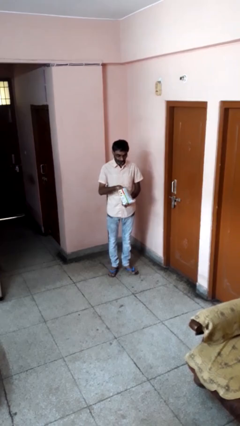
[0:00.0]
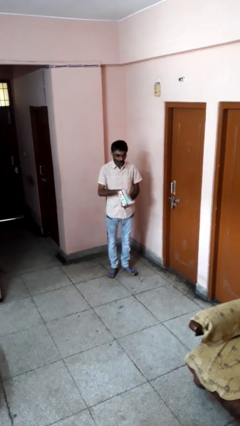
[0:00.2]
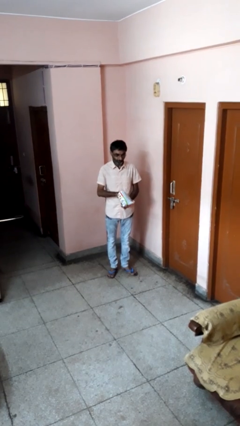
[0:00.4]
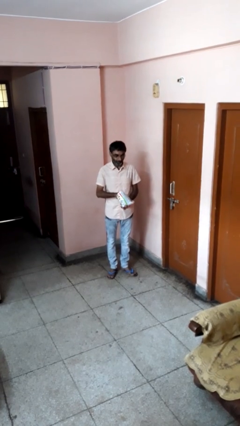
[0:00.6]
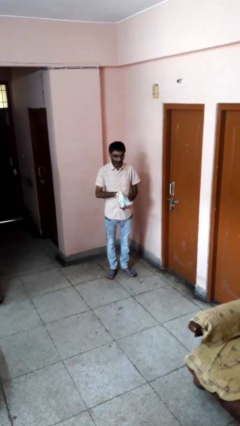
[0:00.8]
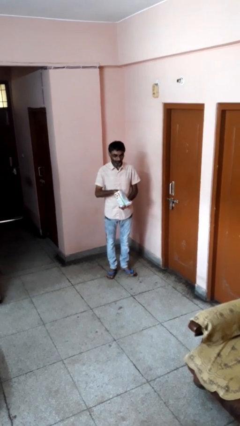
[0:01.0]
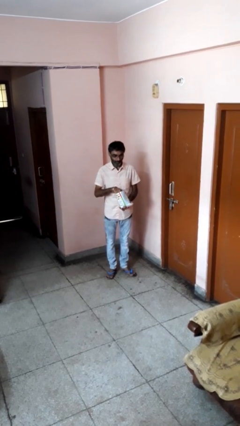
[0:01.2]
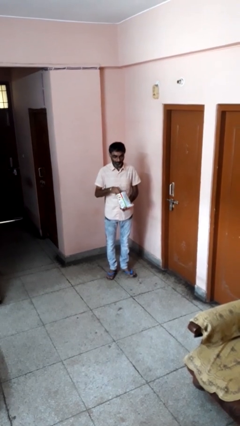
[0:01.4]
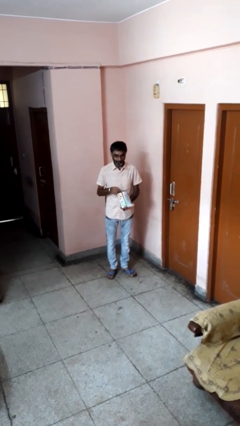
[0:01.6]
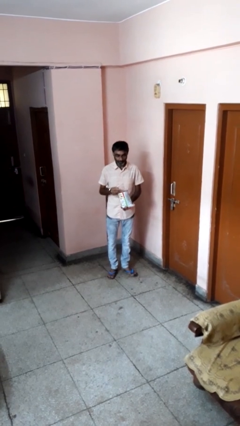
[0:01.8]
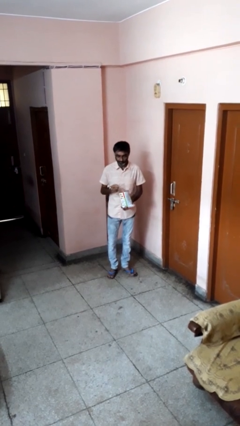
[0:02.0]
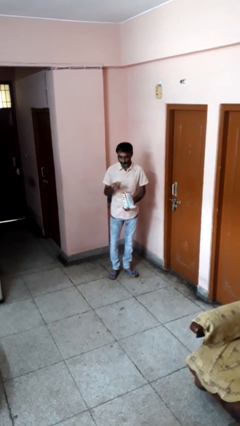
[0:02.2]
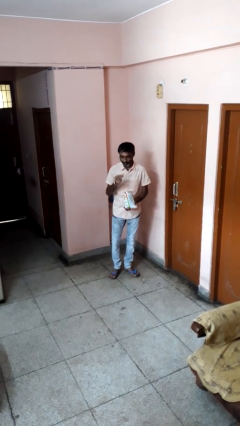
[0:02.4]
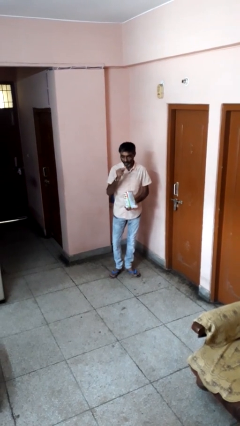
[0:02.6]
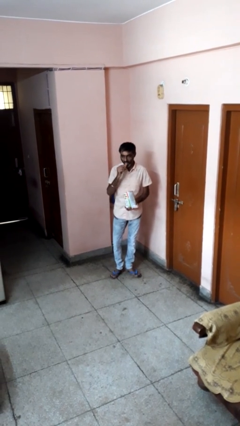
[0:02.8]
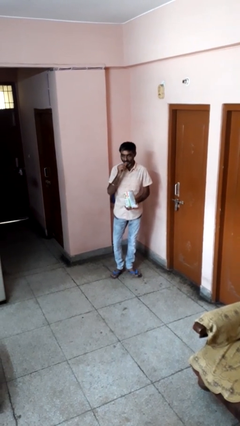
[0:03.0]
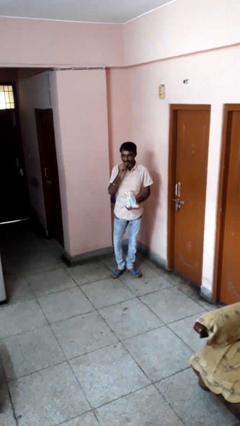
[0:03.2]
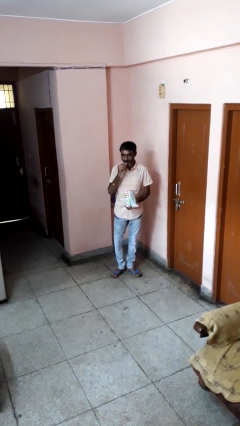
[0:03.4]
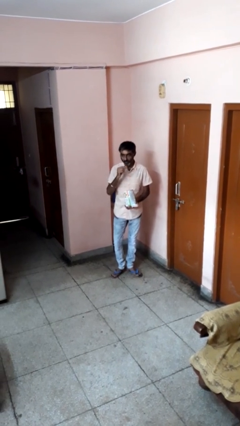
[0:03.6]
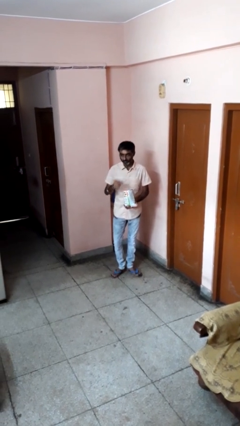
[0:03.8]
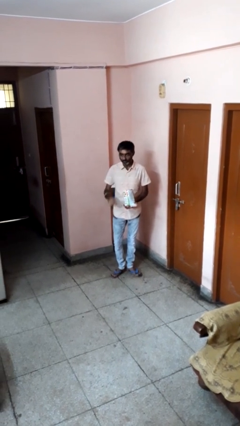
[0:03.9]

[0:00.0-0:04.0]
person eats snack from bag

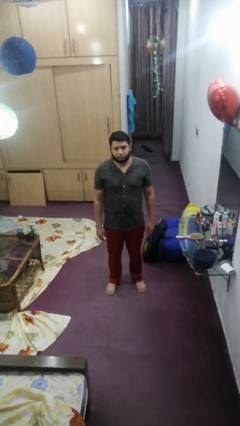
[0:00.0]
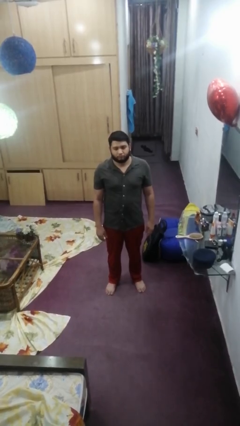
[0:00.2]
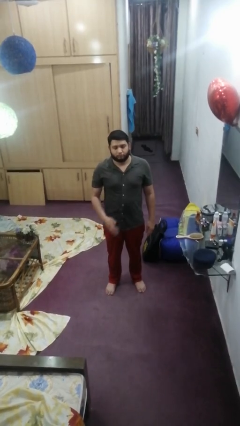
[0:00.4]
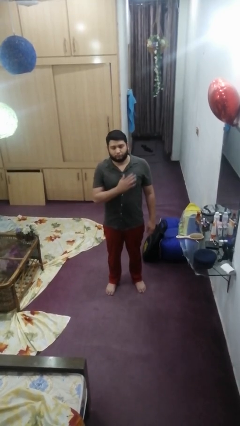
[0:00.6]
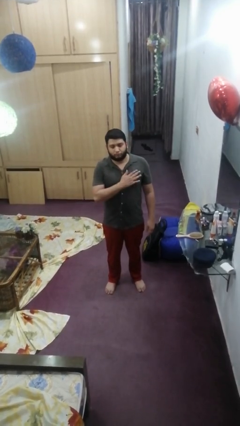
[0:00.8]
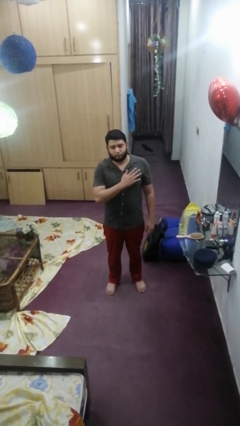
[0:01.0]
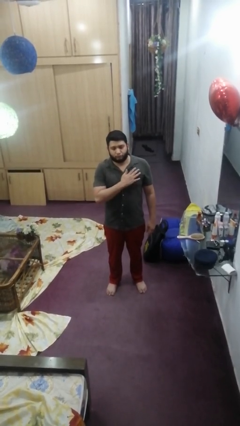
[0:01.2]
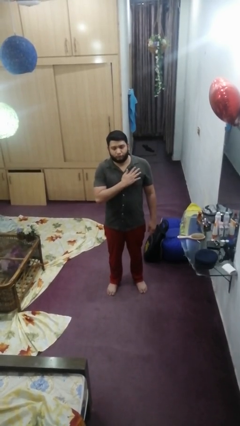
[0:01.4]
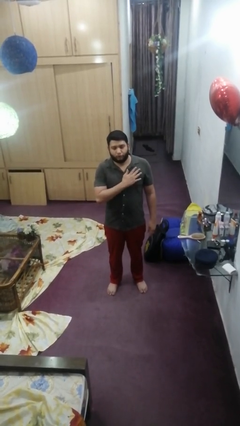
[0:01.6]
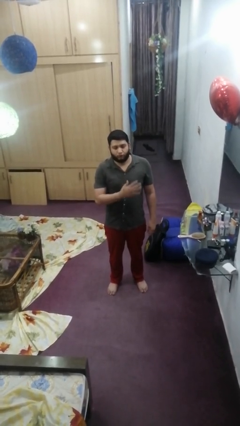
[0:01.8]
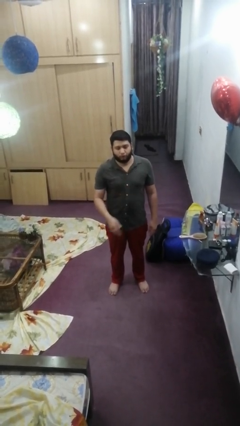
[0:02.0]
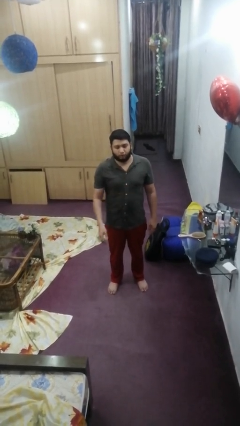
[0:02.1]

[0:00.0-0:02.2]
person drums on chest

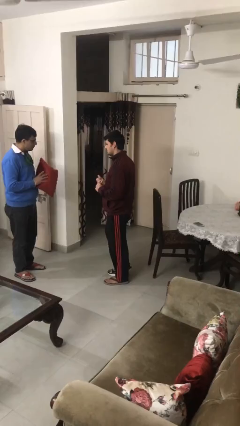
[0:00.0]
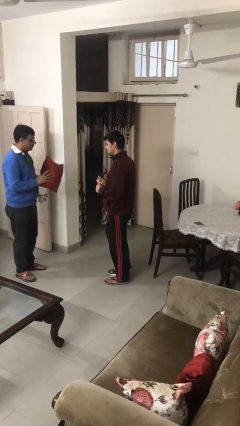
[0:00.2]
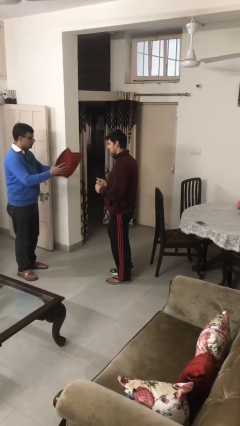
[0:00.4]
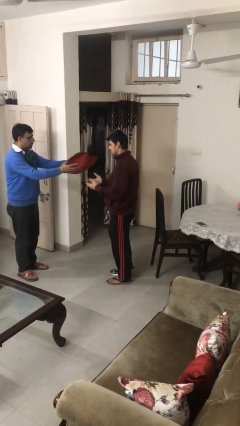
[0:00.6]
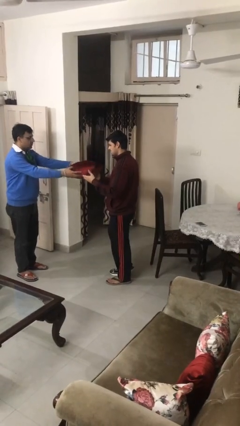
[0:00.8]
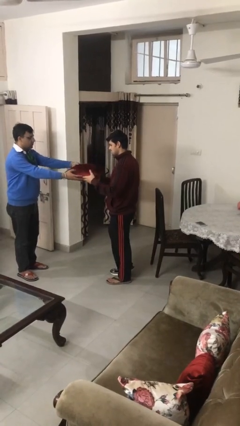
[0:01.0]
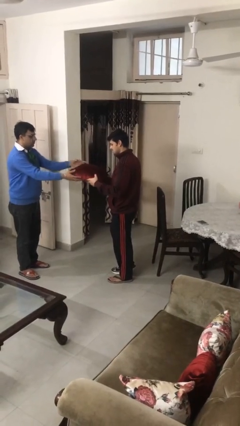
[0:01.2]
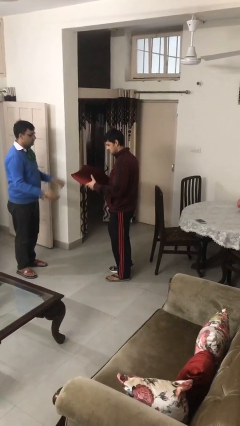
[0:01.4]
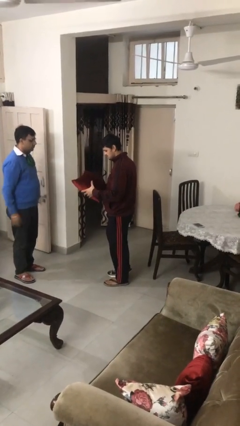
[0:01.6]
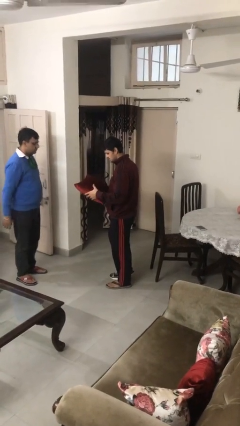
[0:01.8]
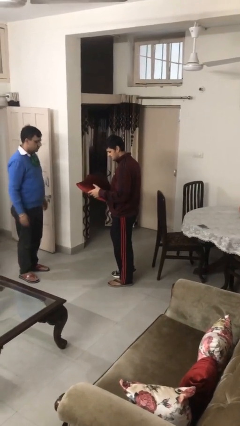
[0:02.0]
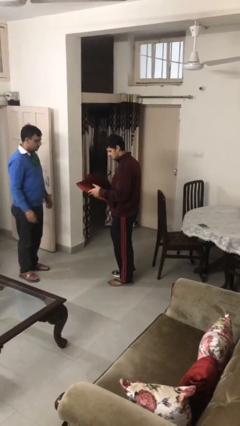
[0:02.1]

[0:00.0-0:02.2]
person transfers object to person

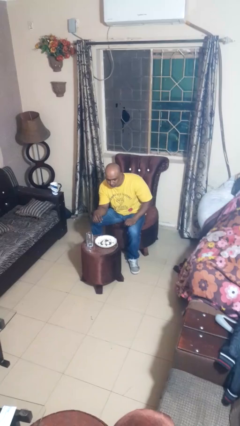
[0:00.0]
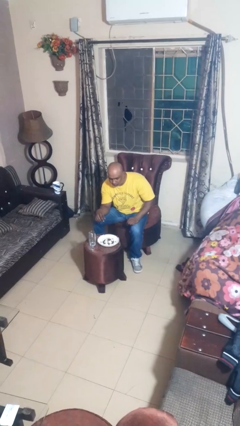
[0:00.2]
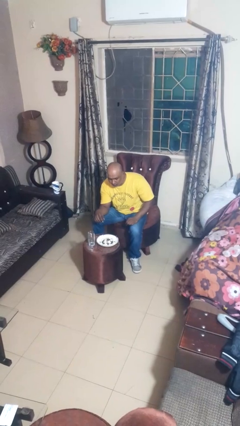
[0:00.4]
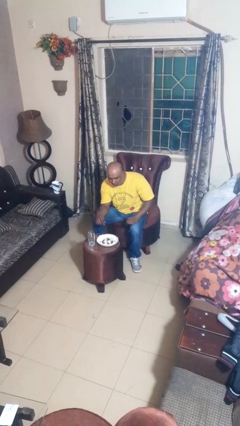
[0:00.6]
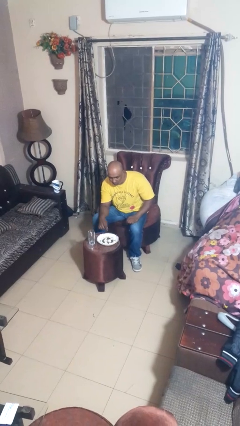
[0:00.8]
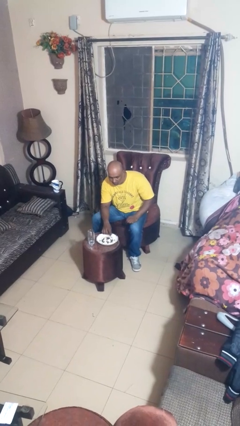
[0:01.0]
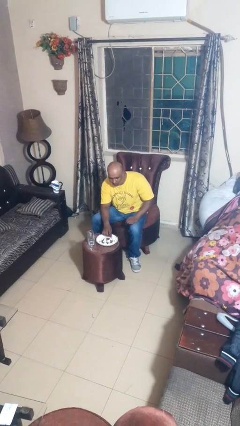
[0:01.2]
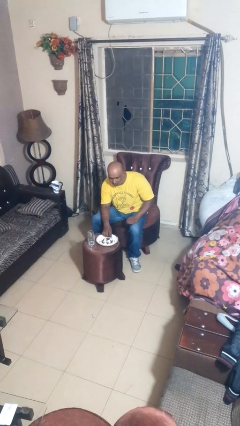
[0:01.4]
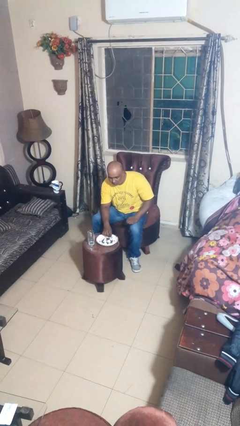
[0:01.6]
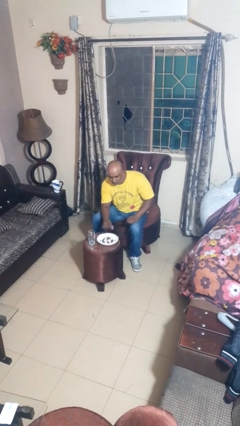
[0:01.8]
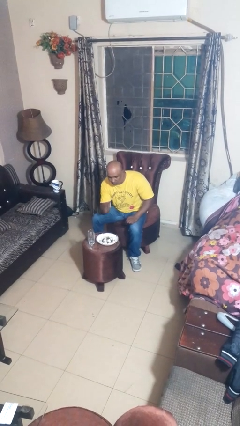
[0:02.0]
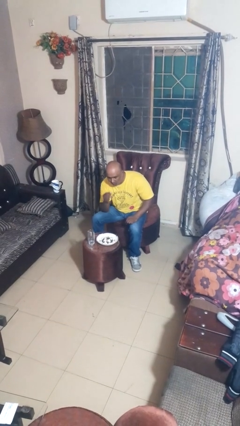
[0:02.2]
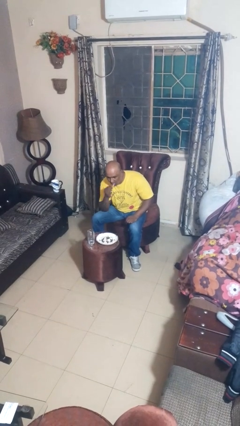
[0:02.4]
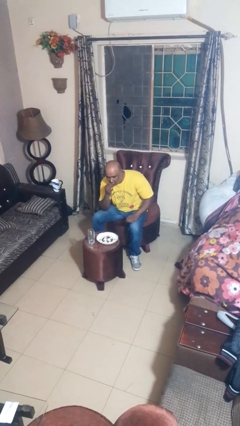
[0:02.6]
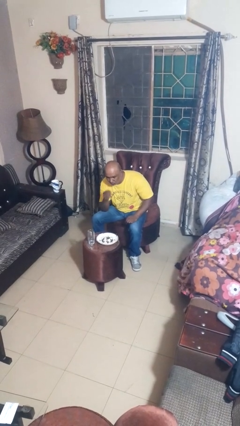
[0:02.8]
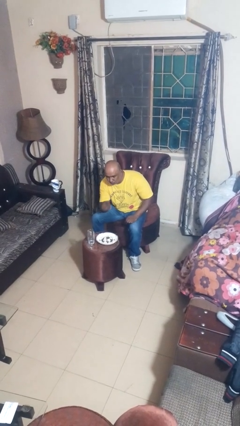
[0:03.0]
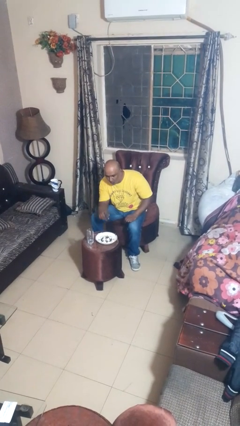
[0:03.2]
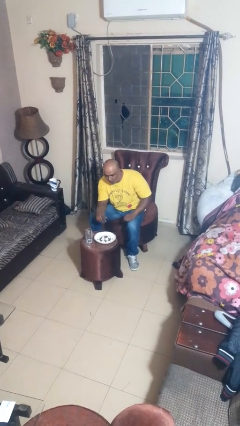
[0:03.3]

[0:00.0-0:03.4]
person eats with hands

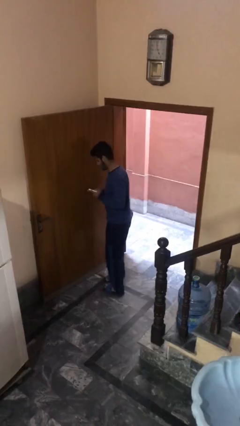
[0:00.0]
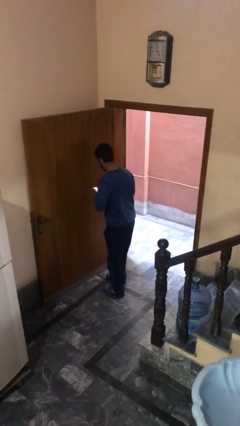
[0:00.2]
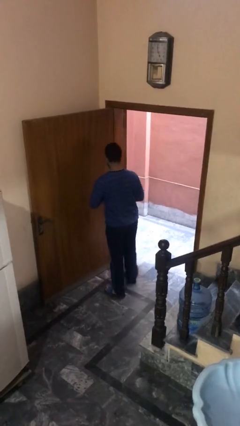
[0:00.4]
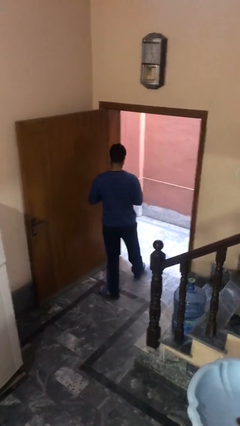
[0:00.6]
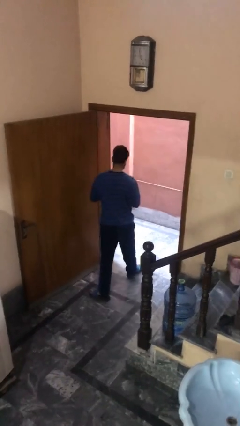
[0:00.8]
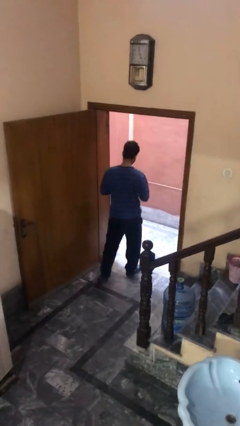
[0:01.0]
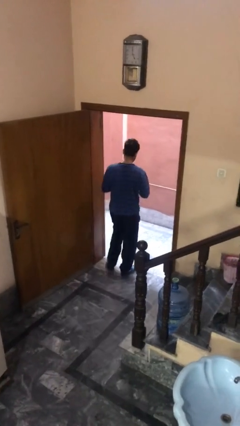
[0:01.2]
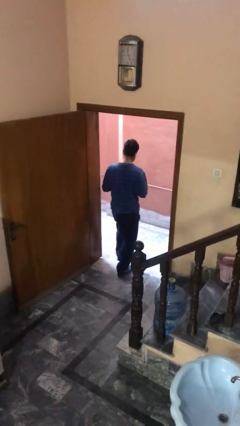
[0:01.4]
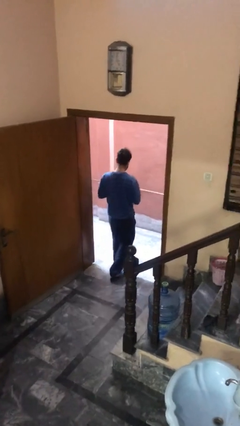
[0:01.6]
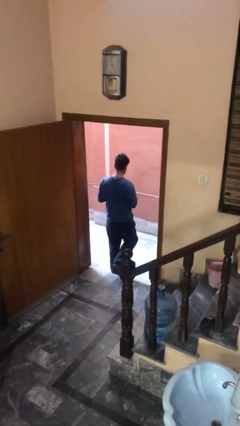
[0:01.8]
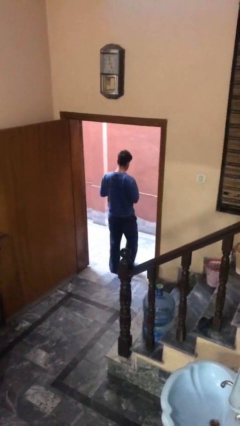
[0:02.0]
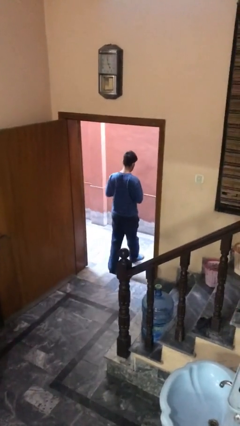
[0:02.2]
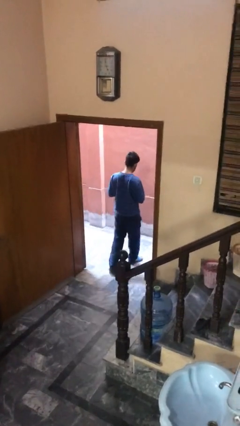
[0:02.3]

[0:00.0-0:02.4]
person exits scene through structure

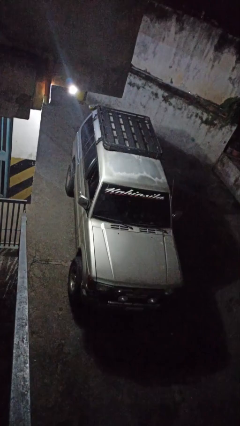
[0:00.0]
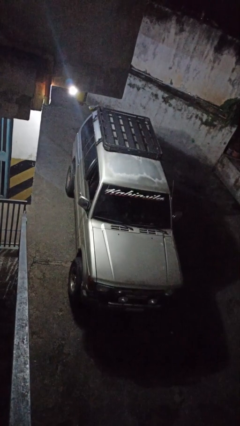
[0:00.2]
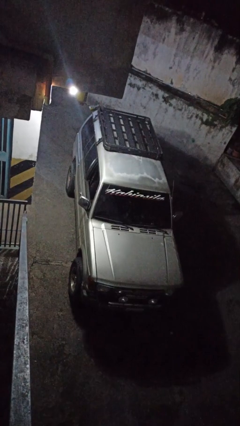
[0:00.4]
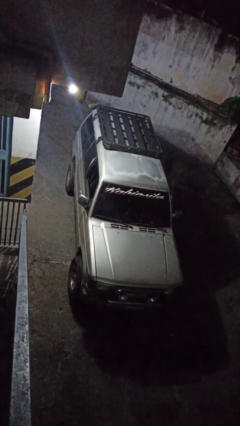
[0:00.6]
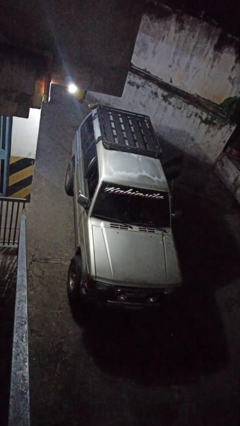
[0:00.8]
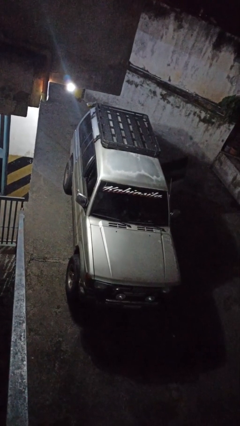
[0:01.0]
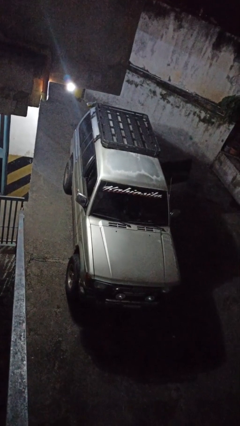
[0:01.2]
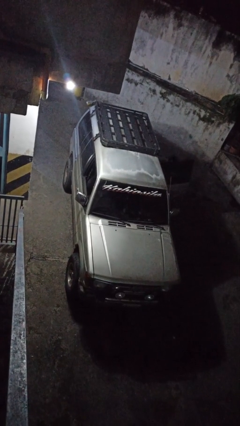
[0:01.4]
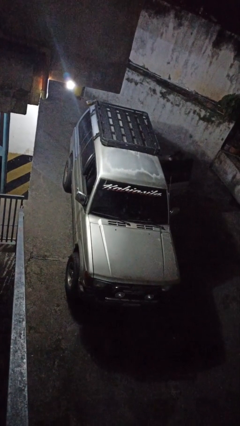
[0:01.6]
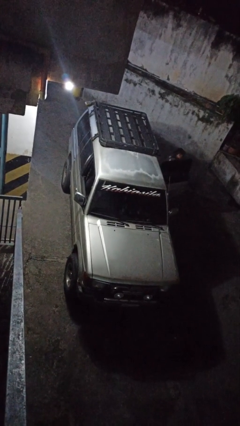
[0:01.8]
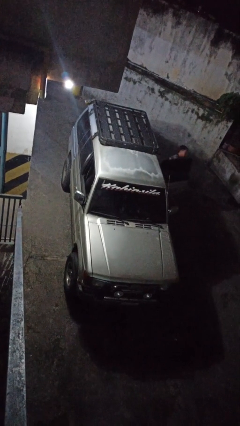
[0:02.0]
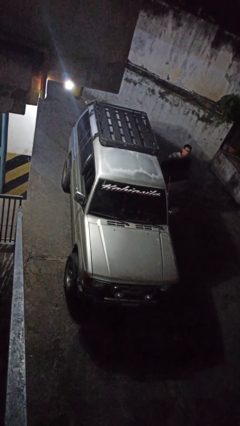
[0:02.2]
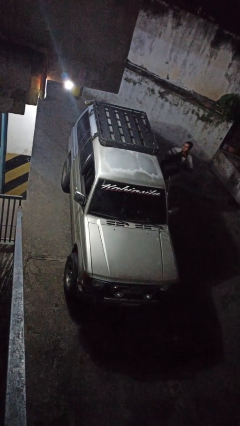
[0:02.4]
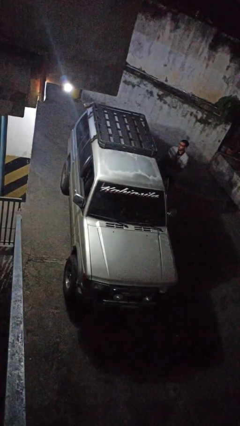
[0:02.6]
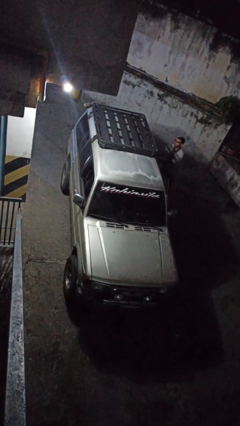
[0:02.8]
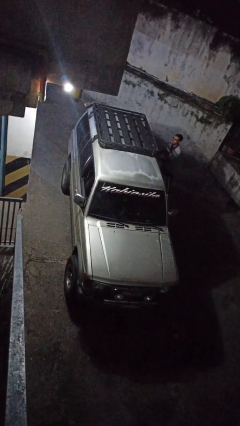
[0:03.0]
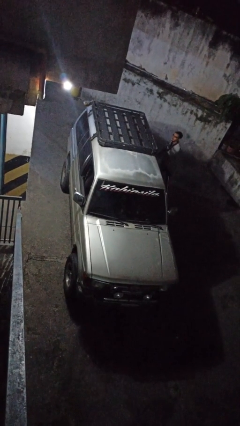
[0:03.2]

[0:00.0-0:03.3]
car drops off person
